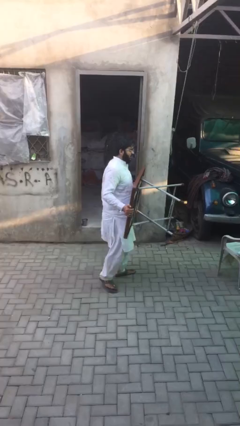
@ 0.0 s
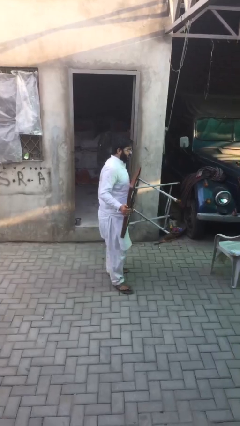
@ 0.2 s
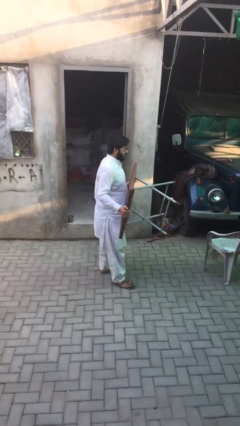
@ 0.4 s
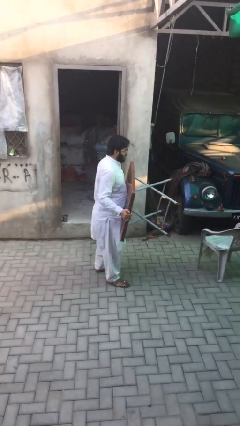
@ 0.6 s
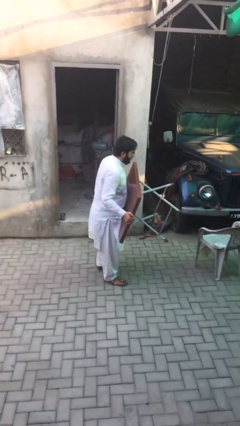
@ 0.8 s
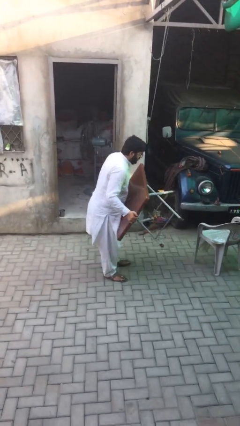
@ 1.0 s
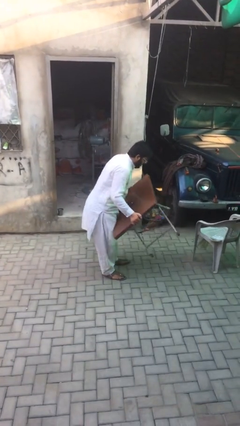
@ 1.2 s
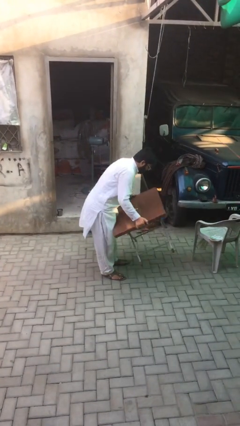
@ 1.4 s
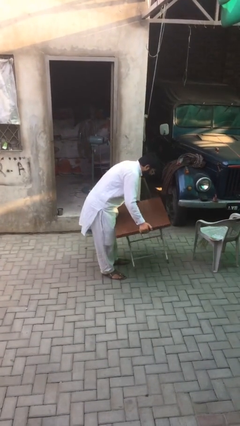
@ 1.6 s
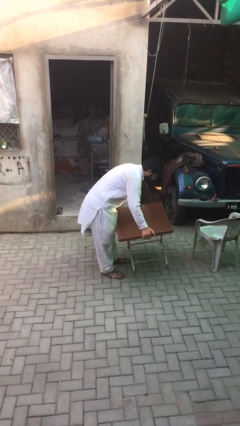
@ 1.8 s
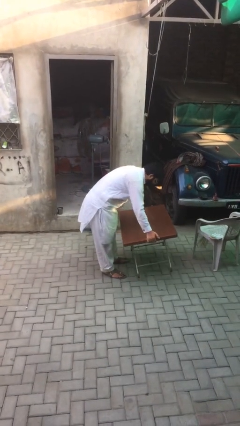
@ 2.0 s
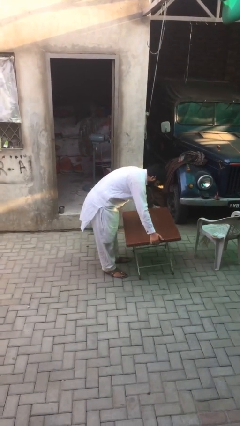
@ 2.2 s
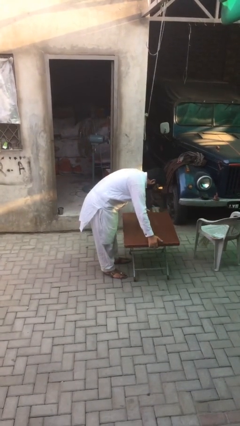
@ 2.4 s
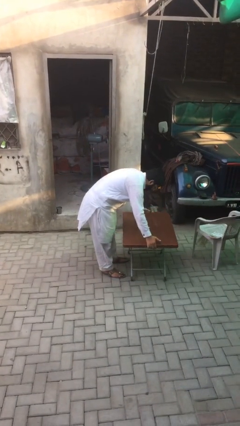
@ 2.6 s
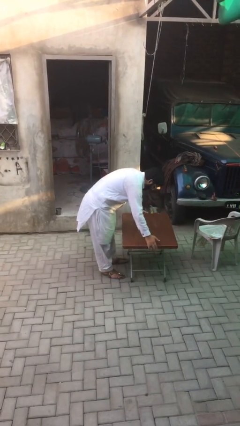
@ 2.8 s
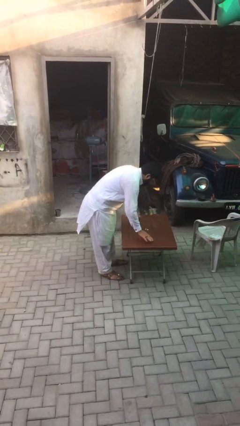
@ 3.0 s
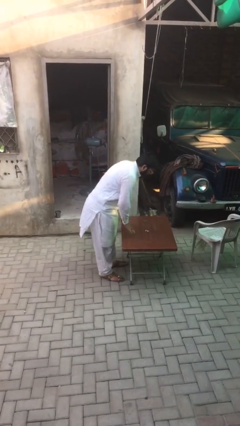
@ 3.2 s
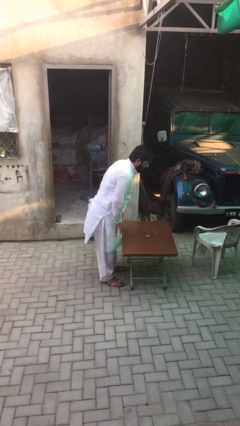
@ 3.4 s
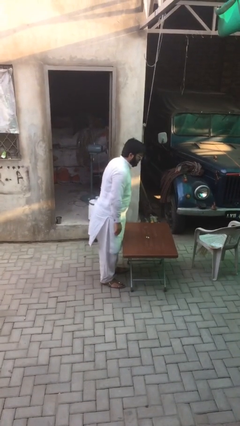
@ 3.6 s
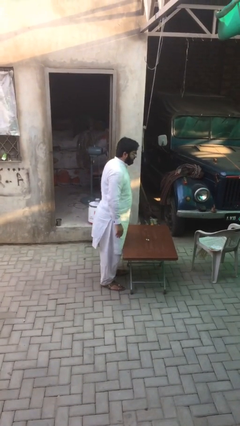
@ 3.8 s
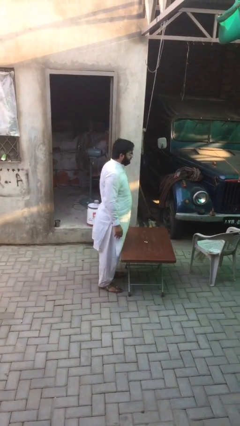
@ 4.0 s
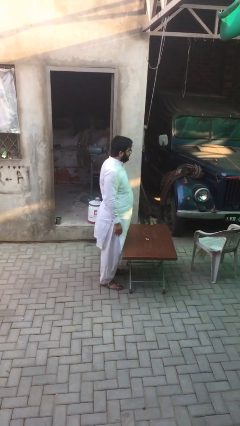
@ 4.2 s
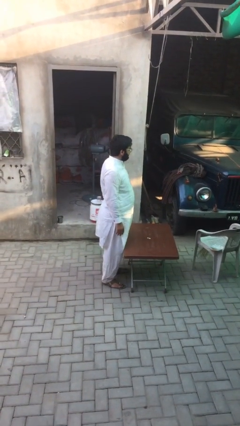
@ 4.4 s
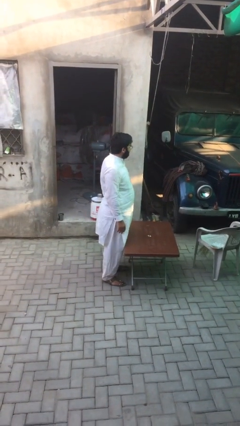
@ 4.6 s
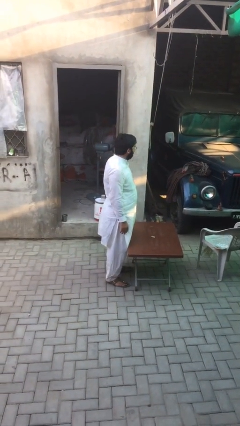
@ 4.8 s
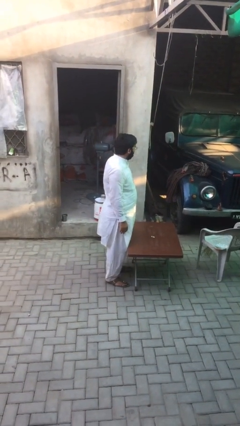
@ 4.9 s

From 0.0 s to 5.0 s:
person puts down object on floor

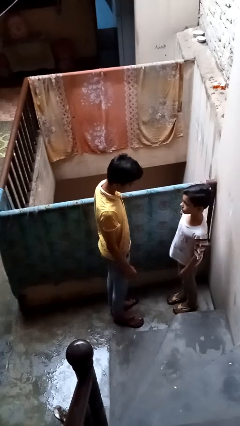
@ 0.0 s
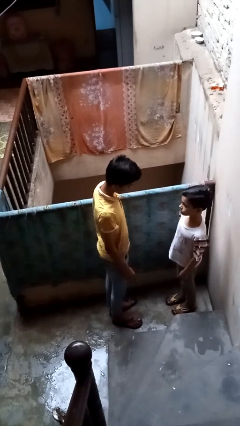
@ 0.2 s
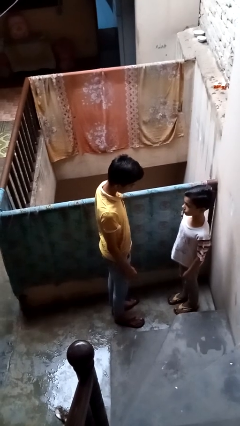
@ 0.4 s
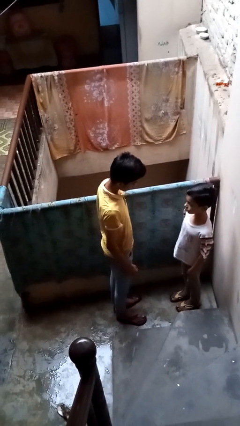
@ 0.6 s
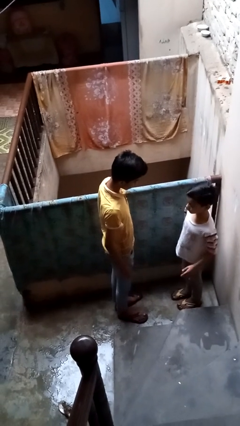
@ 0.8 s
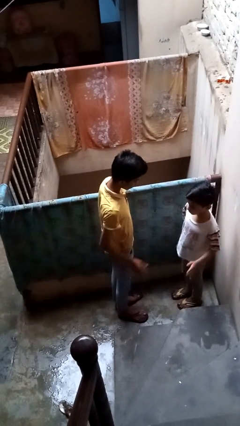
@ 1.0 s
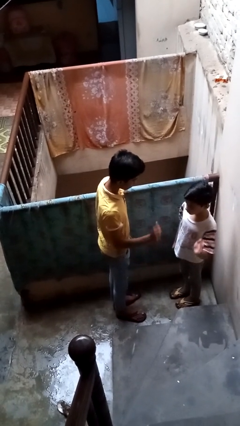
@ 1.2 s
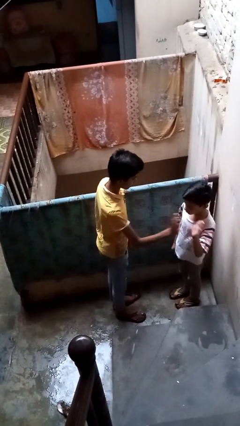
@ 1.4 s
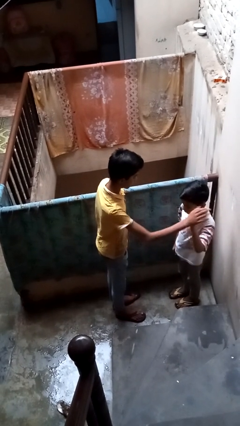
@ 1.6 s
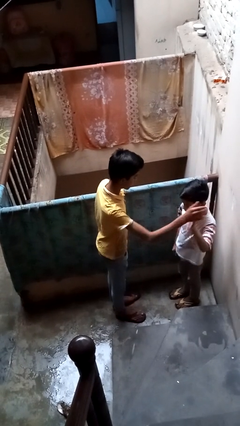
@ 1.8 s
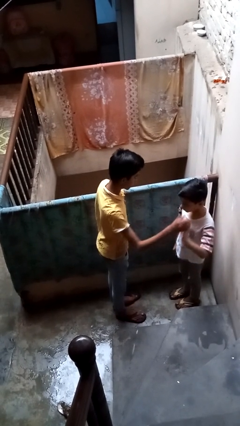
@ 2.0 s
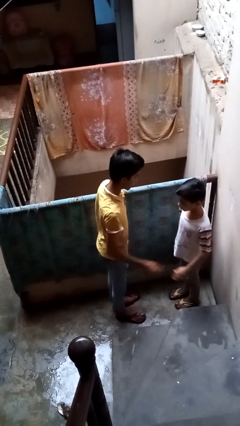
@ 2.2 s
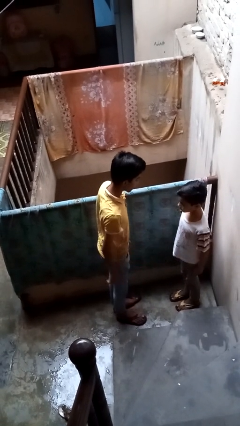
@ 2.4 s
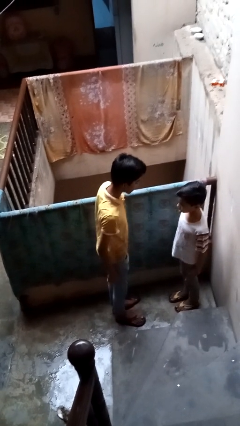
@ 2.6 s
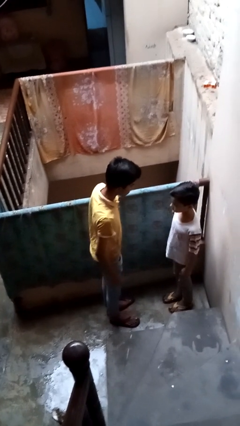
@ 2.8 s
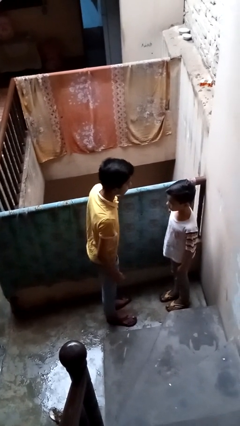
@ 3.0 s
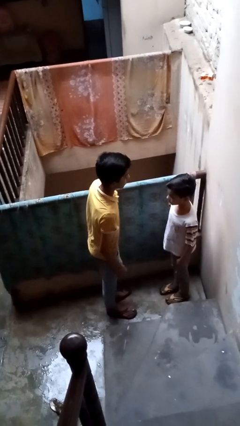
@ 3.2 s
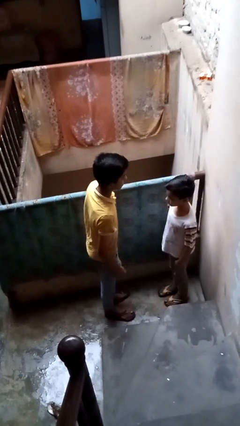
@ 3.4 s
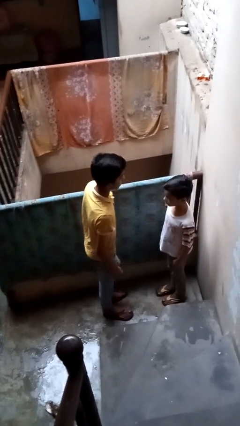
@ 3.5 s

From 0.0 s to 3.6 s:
person highfives hand

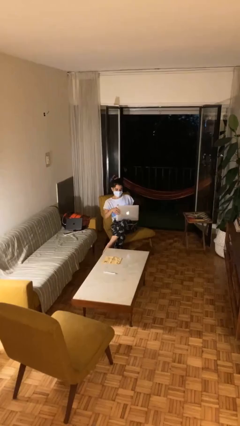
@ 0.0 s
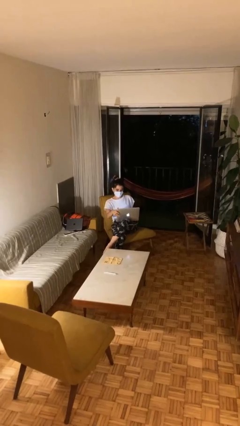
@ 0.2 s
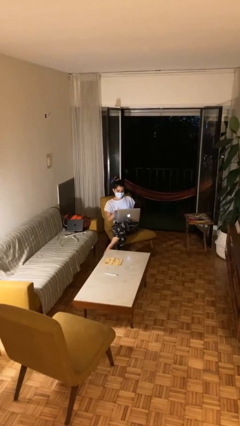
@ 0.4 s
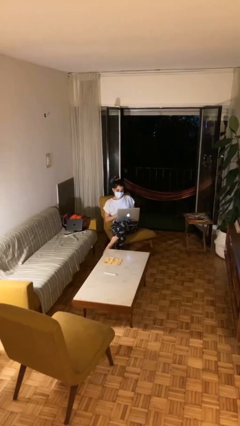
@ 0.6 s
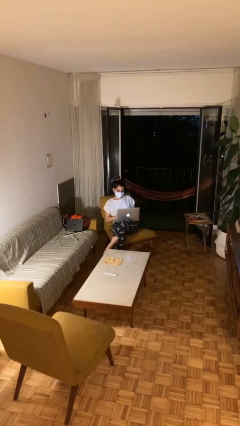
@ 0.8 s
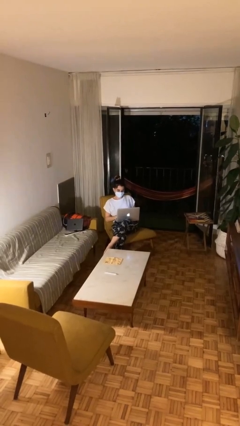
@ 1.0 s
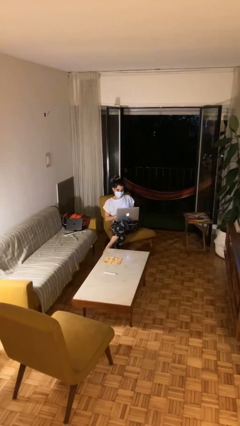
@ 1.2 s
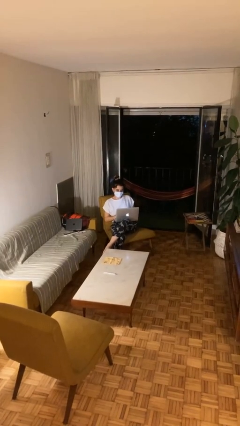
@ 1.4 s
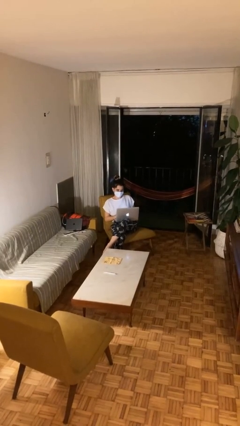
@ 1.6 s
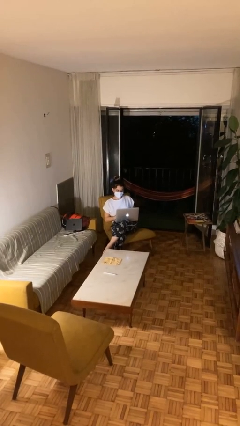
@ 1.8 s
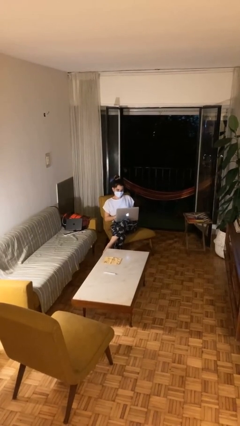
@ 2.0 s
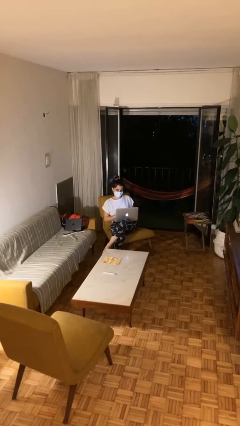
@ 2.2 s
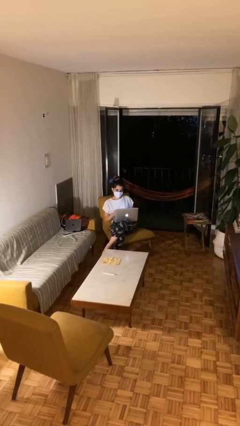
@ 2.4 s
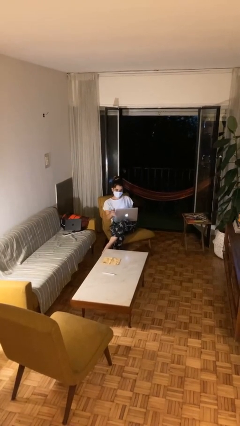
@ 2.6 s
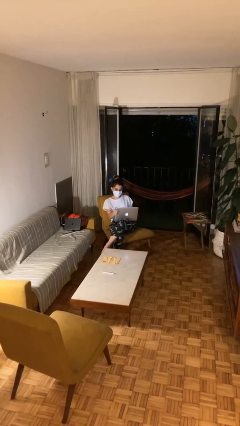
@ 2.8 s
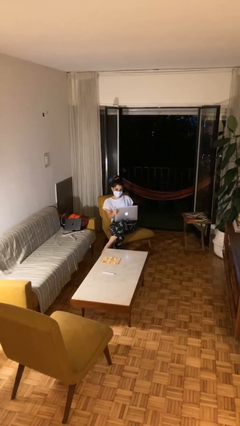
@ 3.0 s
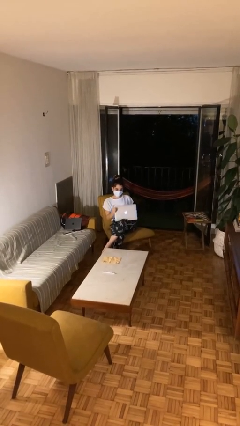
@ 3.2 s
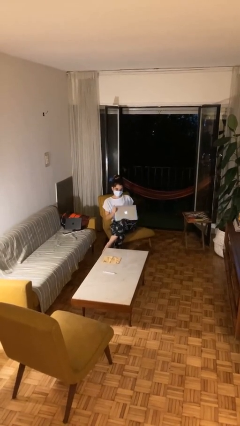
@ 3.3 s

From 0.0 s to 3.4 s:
person interacts with laptop

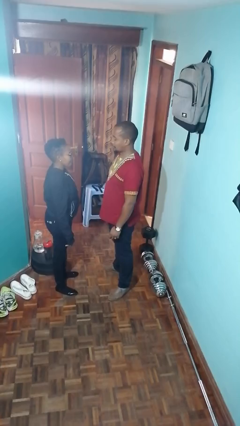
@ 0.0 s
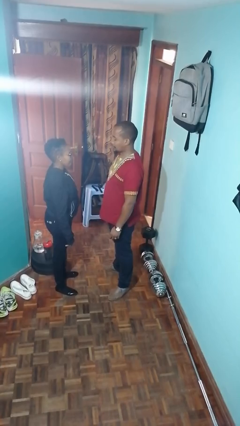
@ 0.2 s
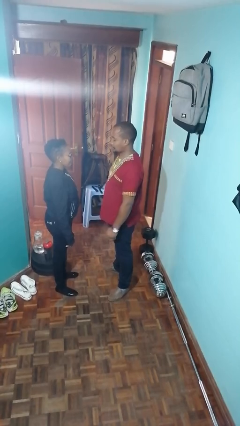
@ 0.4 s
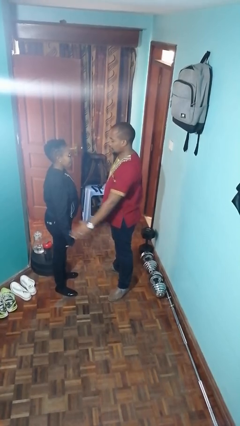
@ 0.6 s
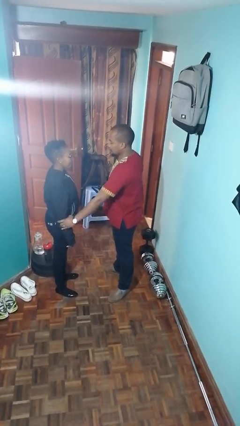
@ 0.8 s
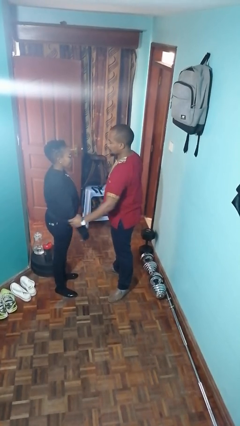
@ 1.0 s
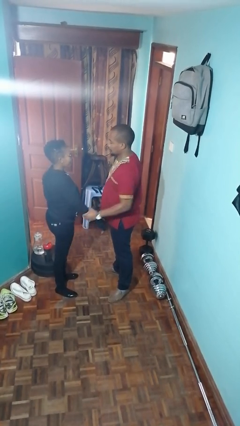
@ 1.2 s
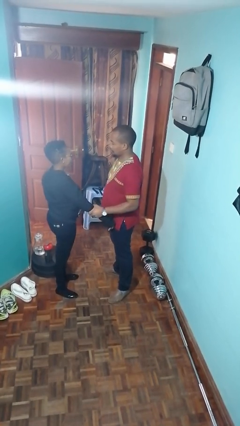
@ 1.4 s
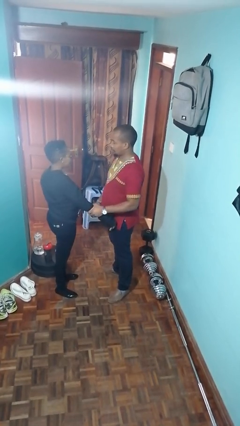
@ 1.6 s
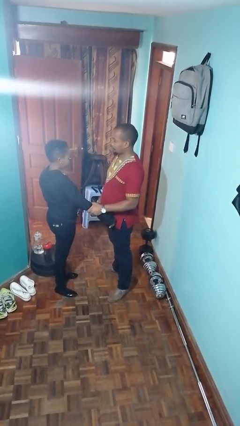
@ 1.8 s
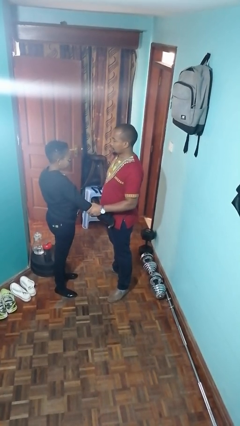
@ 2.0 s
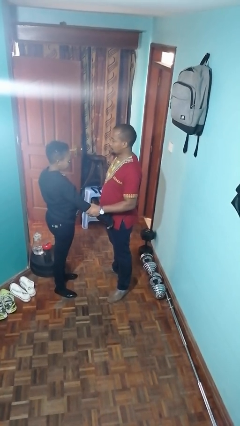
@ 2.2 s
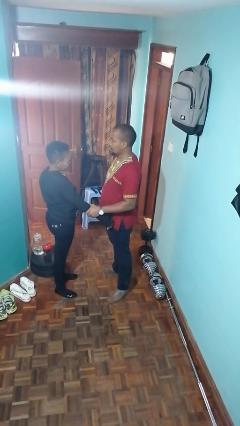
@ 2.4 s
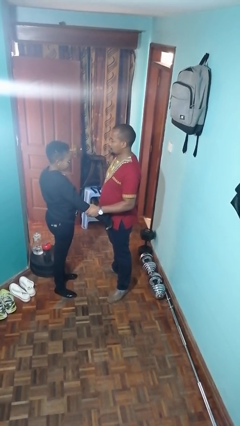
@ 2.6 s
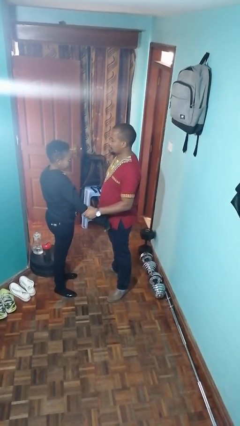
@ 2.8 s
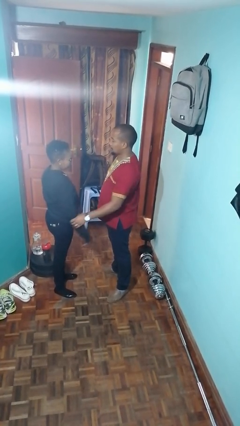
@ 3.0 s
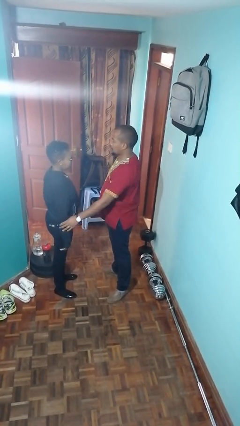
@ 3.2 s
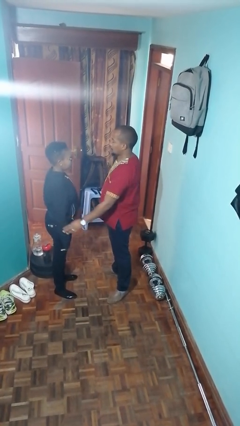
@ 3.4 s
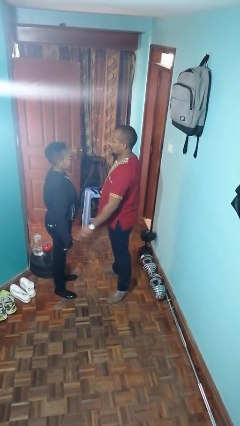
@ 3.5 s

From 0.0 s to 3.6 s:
person grabs person by forearm

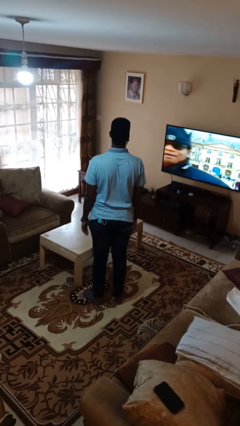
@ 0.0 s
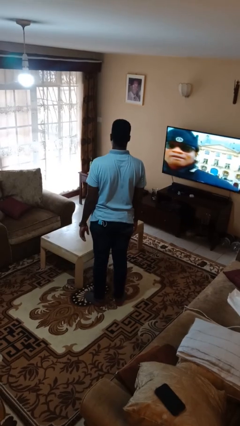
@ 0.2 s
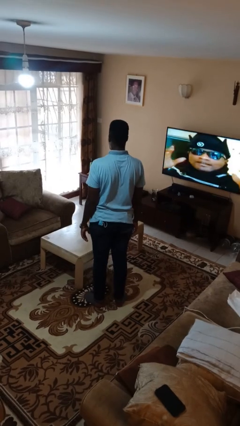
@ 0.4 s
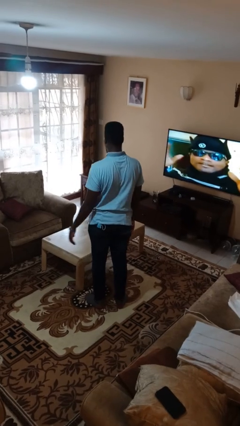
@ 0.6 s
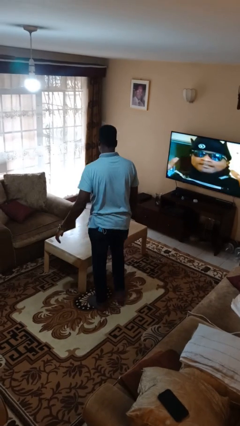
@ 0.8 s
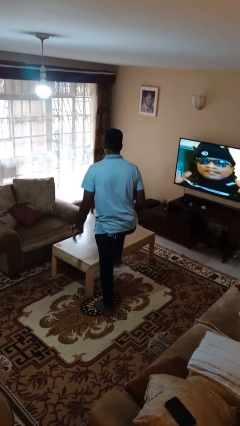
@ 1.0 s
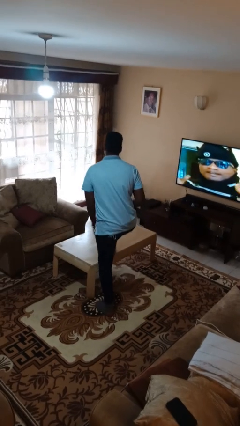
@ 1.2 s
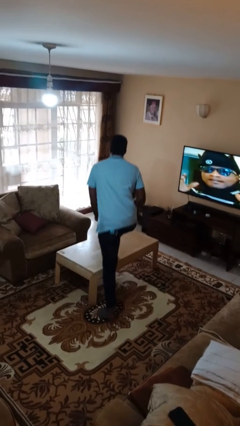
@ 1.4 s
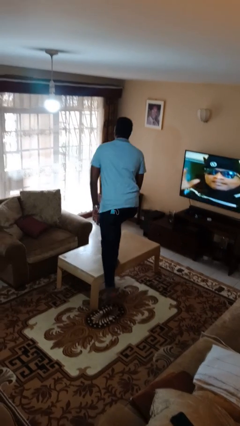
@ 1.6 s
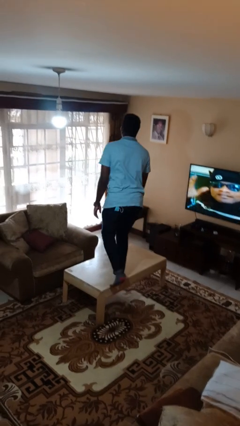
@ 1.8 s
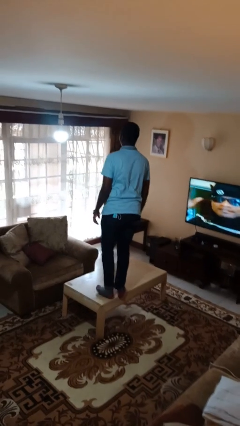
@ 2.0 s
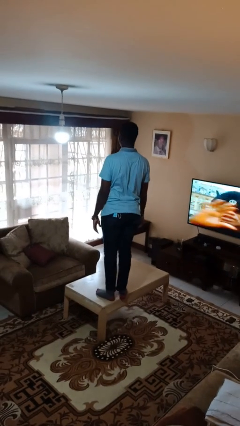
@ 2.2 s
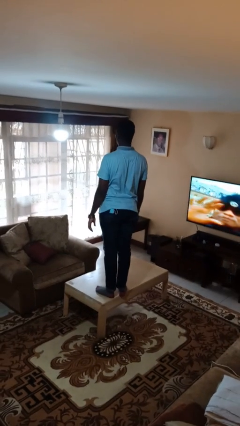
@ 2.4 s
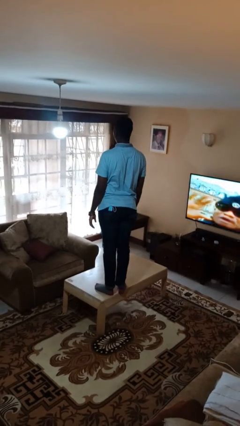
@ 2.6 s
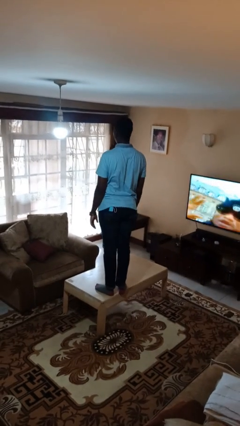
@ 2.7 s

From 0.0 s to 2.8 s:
person climbs on table
